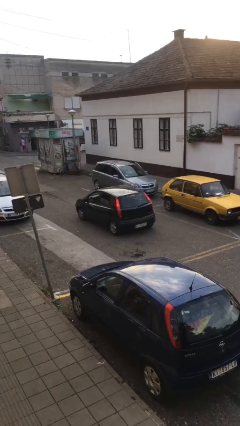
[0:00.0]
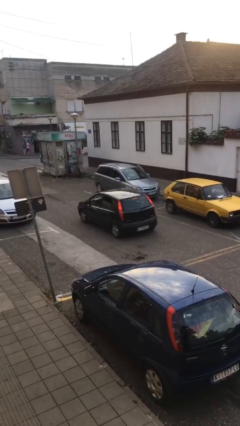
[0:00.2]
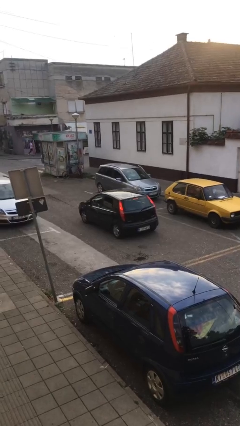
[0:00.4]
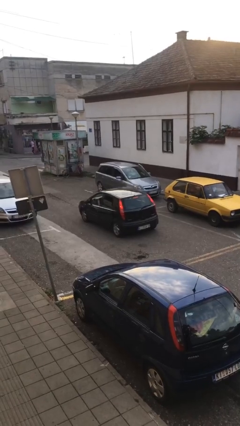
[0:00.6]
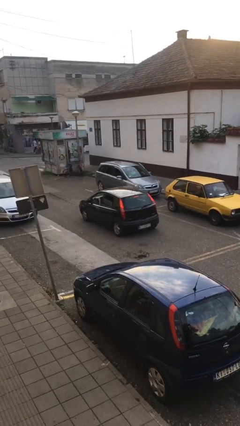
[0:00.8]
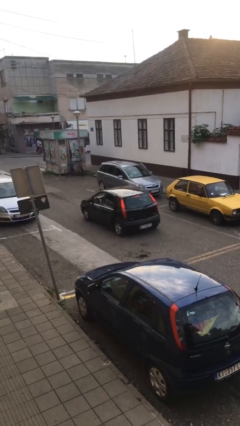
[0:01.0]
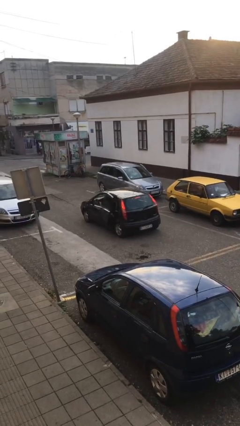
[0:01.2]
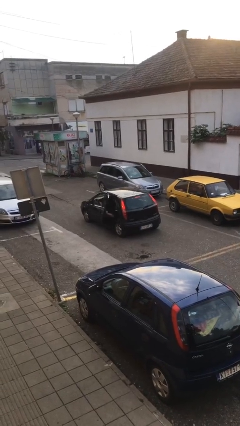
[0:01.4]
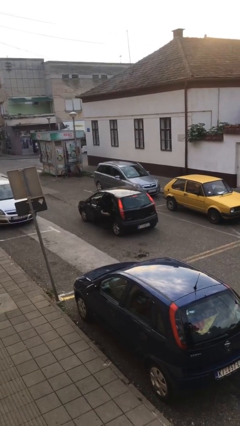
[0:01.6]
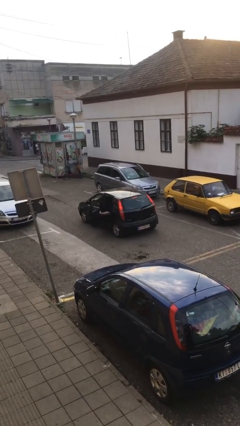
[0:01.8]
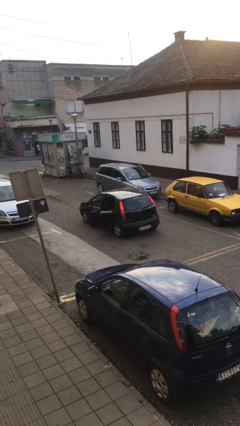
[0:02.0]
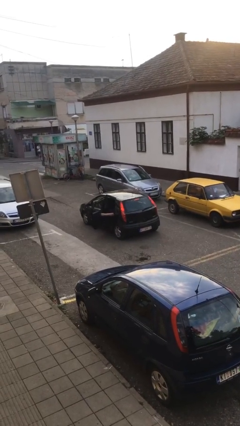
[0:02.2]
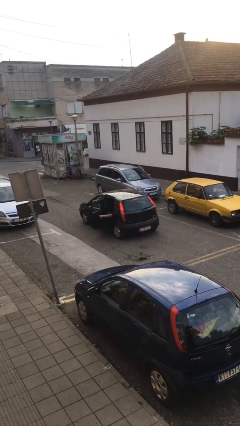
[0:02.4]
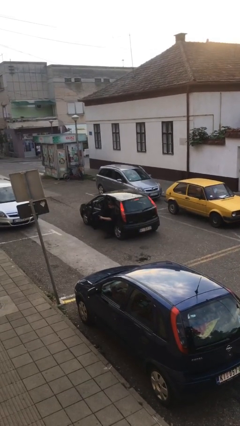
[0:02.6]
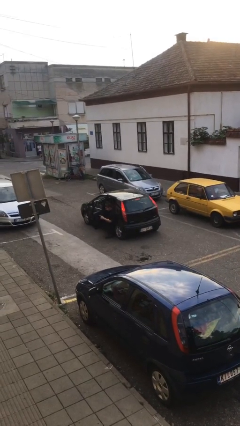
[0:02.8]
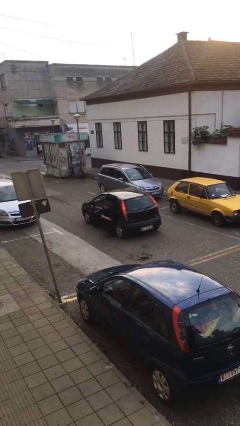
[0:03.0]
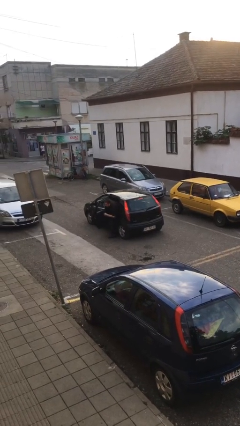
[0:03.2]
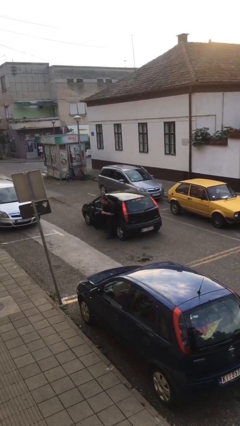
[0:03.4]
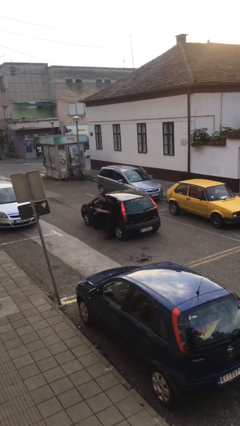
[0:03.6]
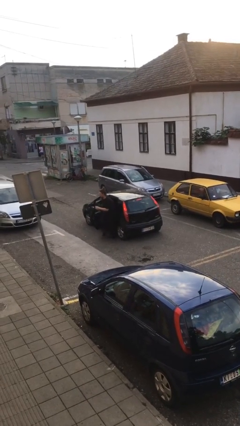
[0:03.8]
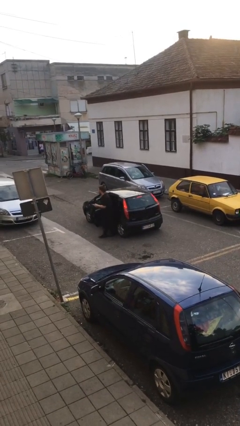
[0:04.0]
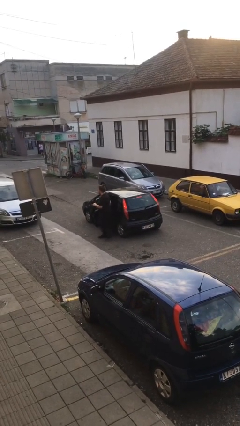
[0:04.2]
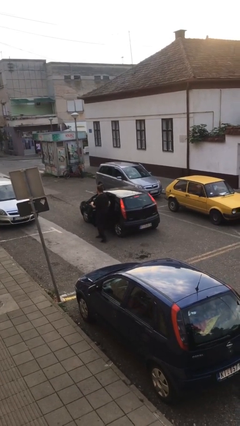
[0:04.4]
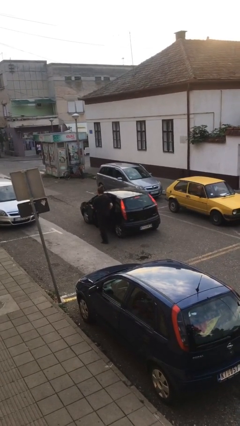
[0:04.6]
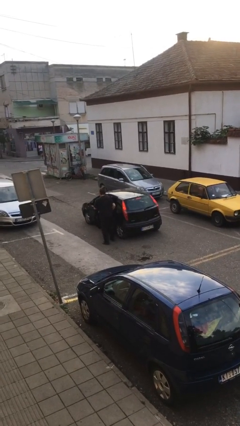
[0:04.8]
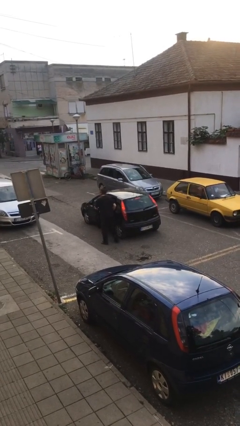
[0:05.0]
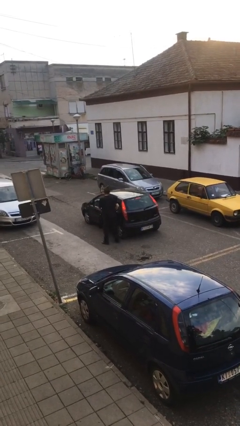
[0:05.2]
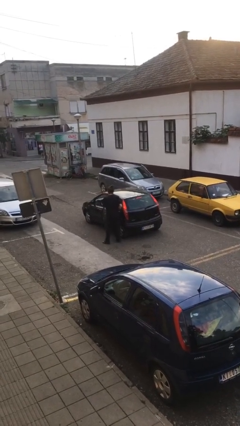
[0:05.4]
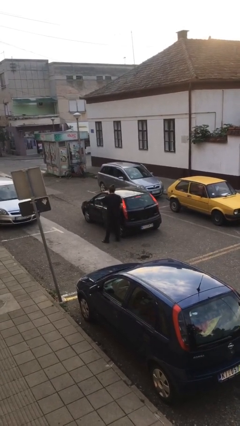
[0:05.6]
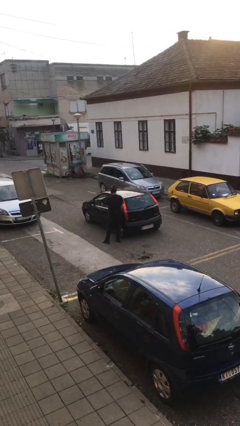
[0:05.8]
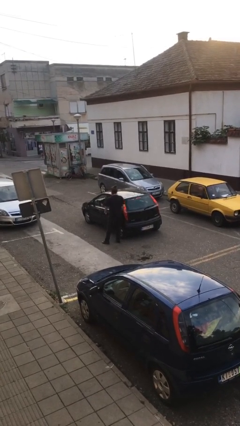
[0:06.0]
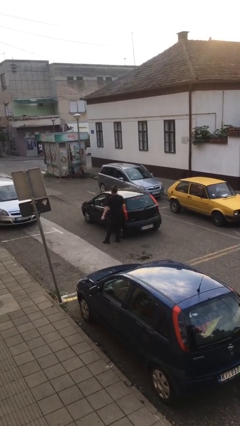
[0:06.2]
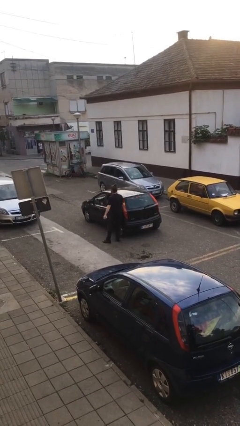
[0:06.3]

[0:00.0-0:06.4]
car drops off person

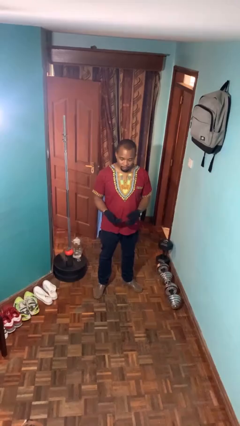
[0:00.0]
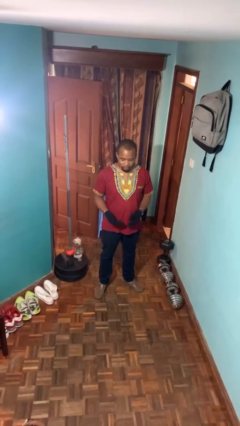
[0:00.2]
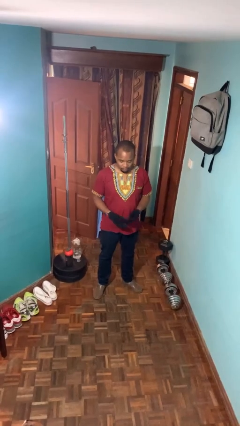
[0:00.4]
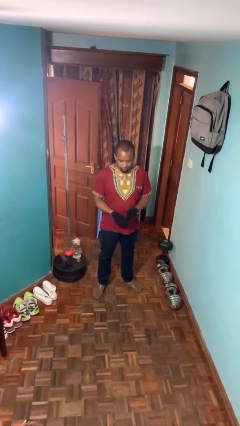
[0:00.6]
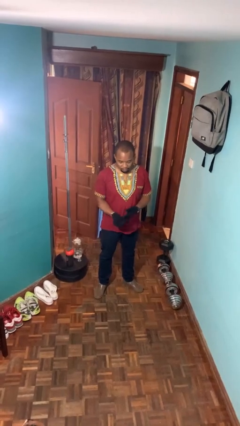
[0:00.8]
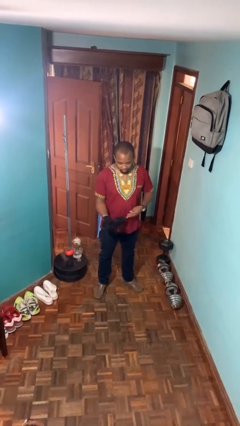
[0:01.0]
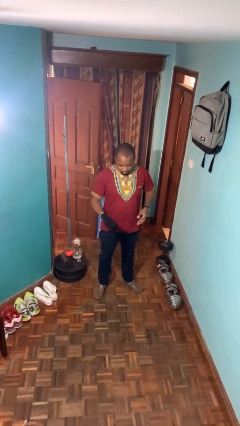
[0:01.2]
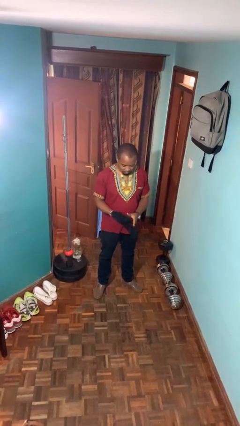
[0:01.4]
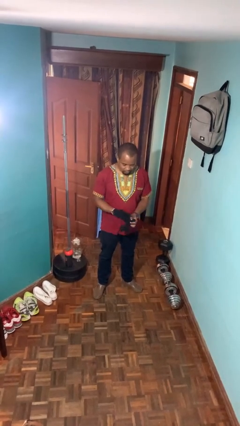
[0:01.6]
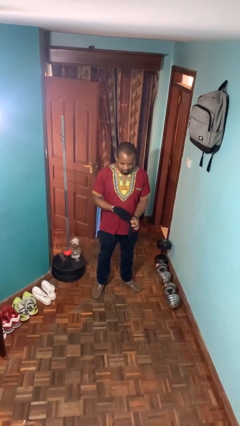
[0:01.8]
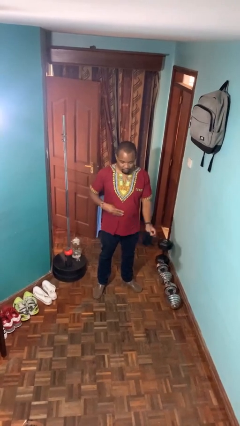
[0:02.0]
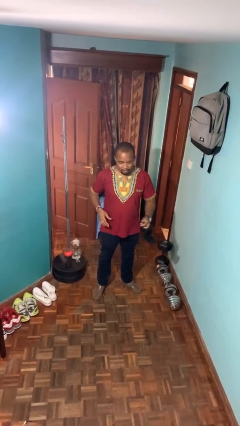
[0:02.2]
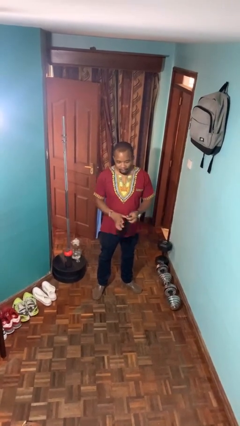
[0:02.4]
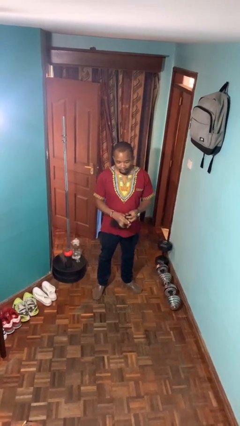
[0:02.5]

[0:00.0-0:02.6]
person takes off gloves

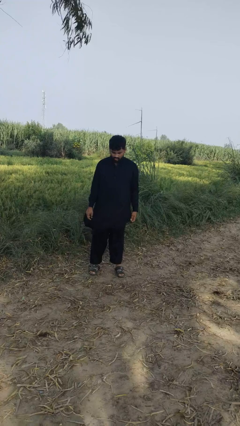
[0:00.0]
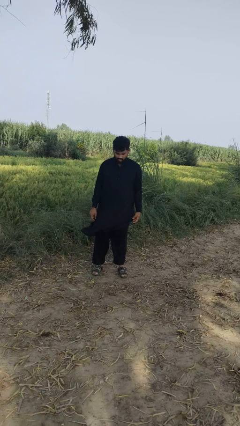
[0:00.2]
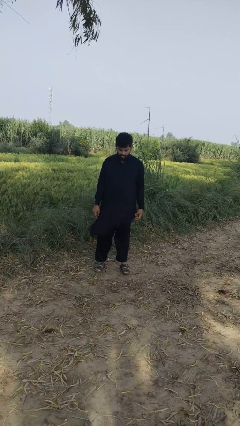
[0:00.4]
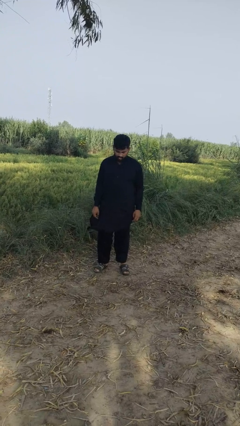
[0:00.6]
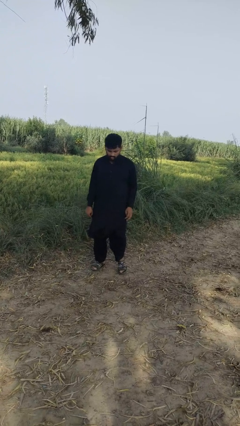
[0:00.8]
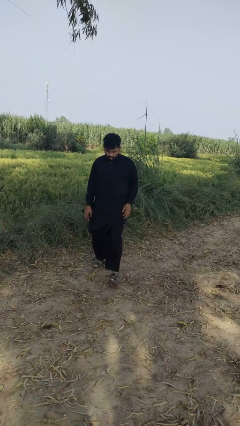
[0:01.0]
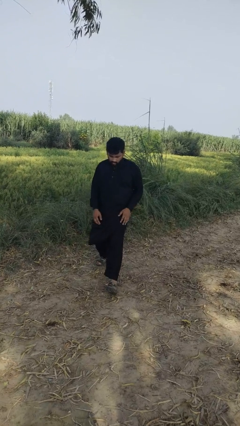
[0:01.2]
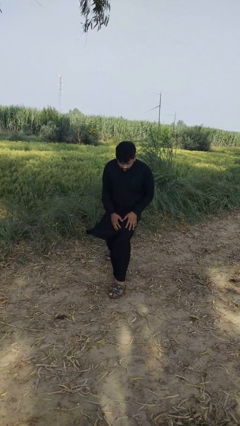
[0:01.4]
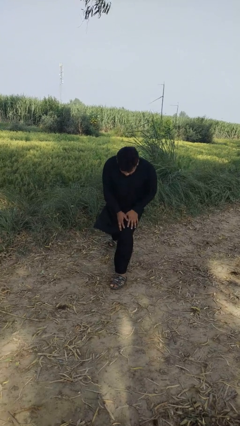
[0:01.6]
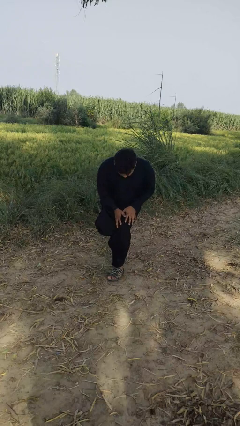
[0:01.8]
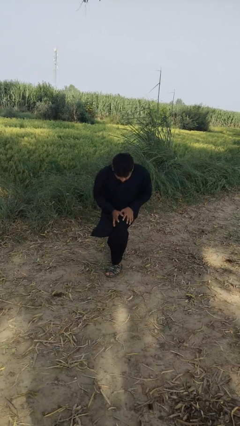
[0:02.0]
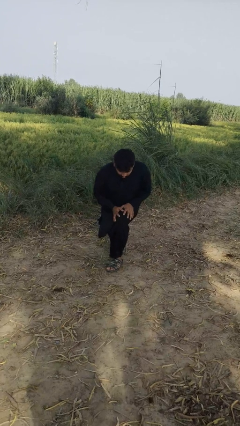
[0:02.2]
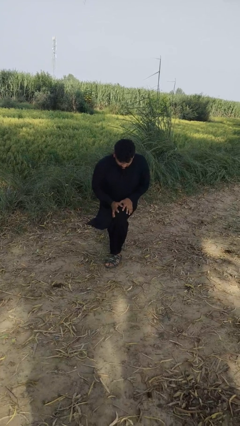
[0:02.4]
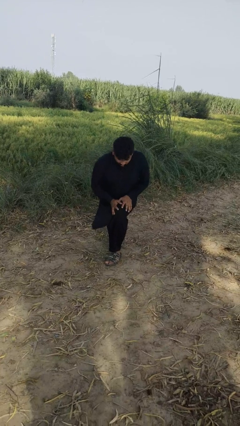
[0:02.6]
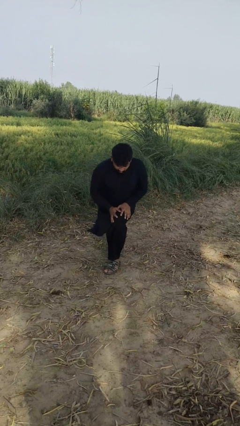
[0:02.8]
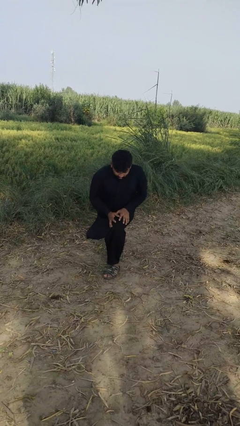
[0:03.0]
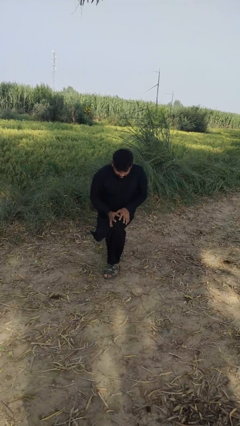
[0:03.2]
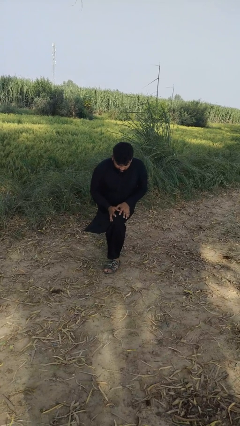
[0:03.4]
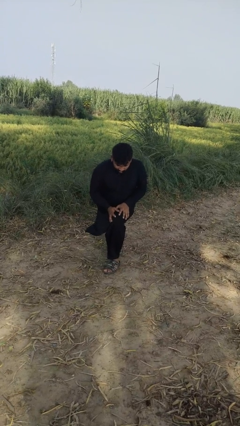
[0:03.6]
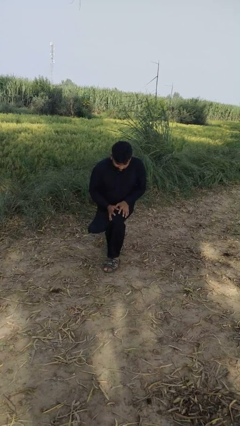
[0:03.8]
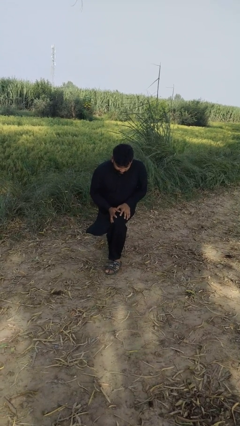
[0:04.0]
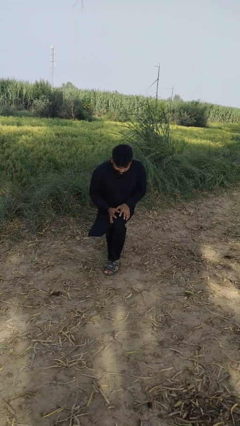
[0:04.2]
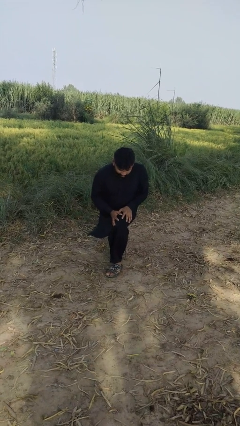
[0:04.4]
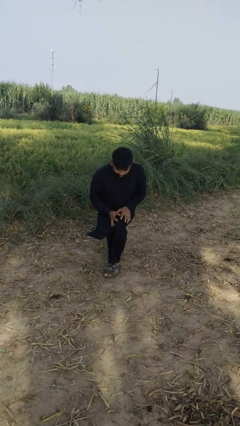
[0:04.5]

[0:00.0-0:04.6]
person exercises with lunges

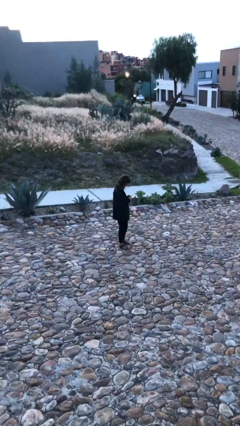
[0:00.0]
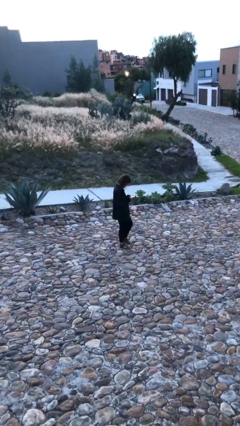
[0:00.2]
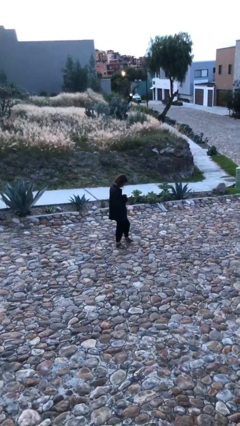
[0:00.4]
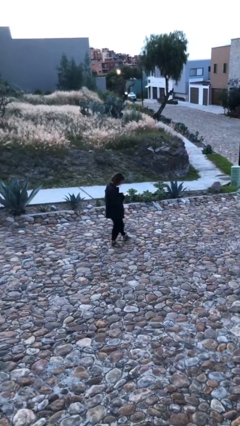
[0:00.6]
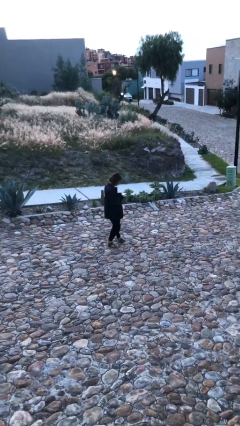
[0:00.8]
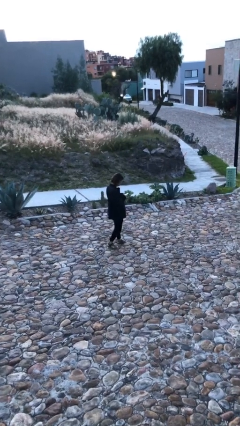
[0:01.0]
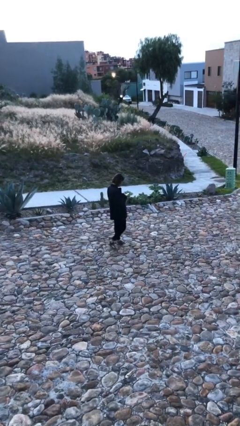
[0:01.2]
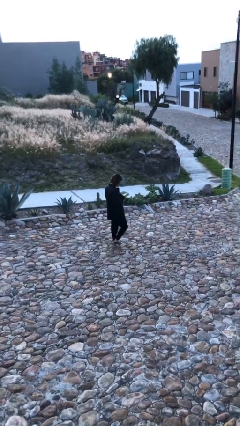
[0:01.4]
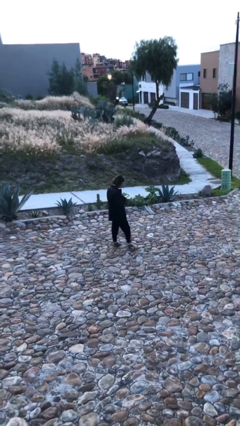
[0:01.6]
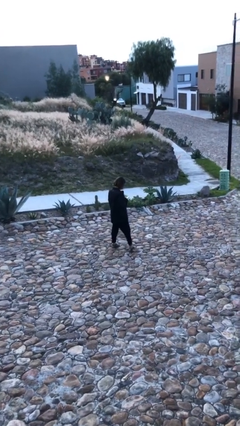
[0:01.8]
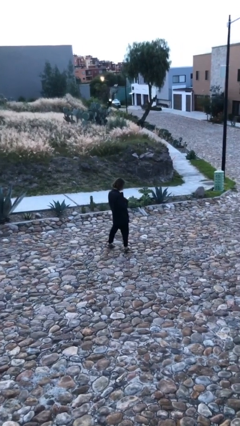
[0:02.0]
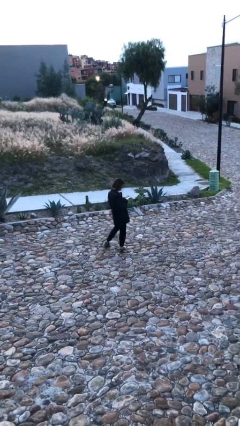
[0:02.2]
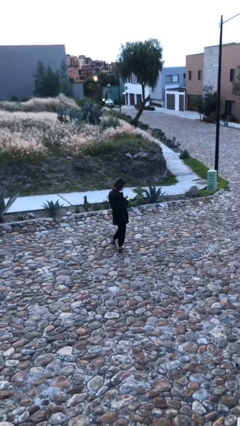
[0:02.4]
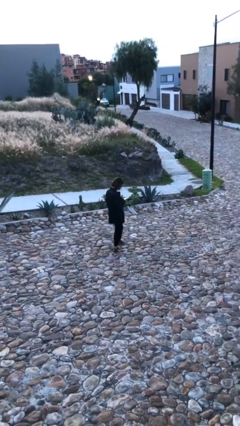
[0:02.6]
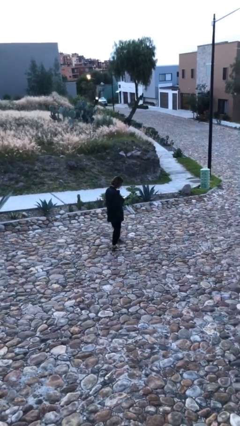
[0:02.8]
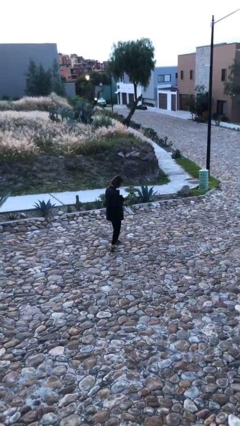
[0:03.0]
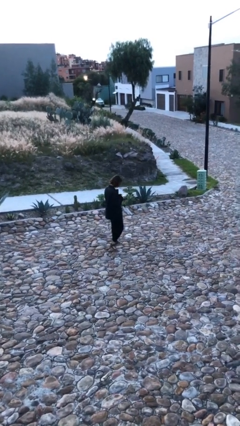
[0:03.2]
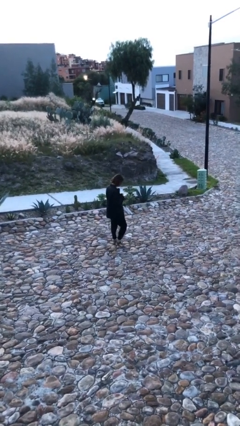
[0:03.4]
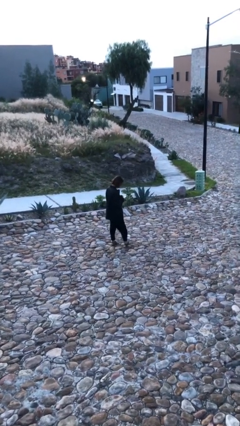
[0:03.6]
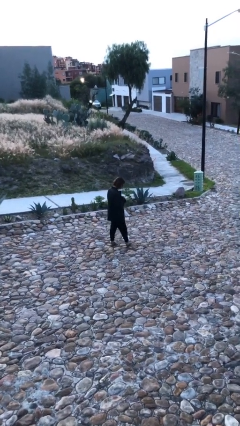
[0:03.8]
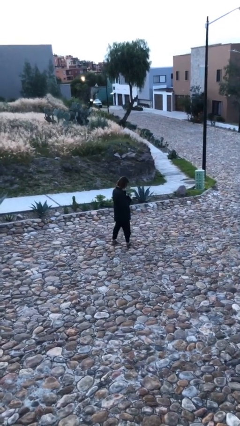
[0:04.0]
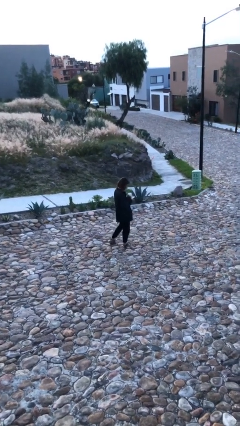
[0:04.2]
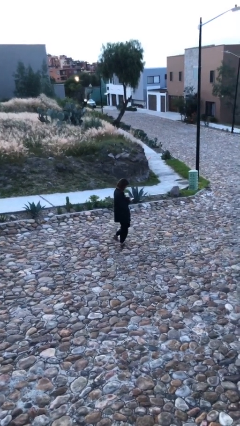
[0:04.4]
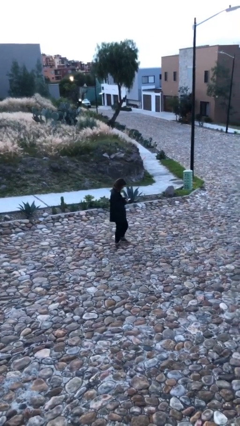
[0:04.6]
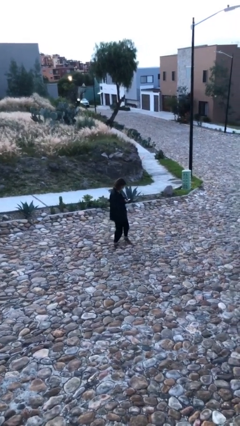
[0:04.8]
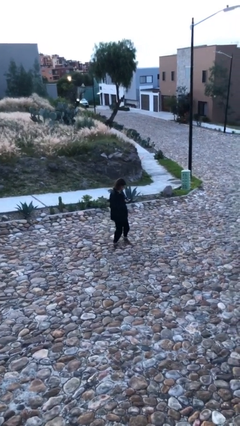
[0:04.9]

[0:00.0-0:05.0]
person texts on phone
